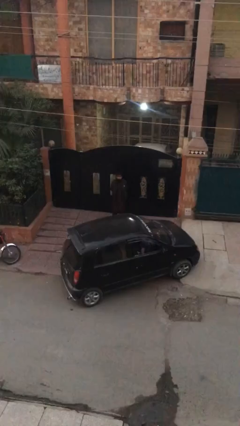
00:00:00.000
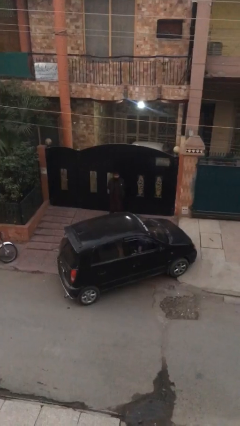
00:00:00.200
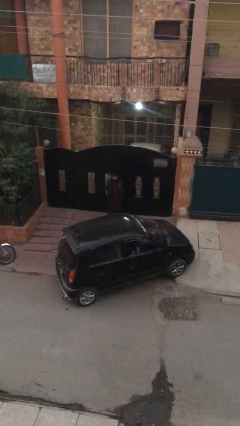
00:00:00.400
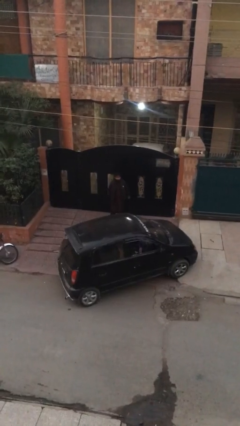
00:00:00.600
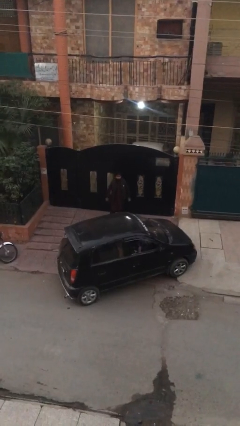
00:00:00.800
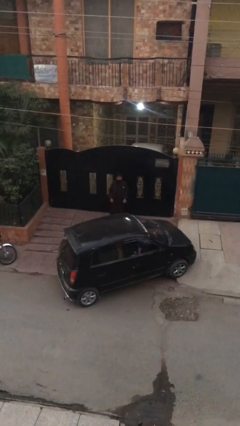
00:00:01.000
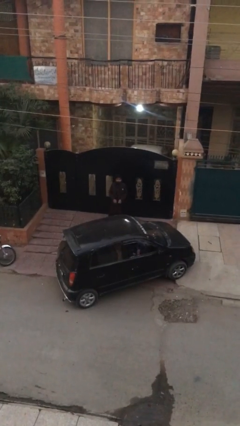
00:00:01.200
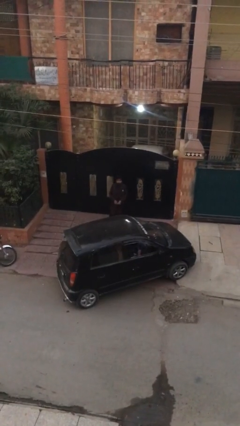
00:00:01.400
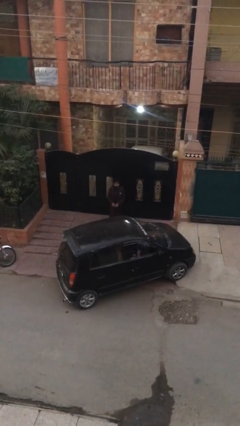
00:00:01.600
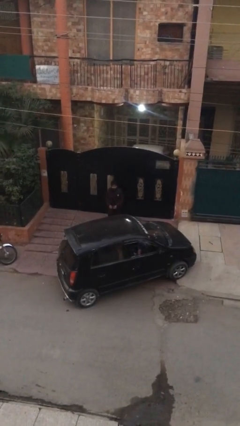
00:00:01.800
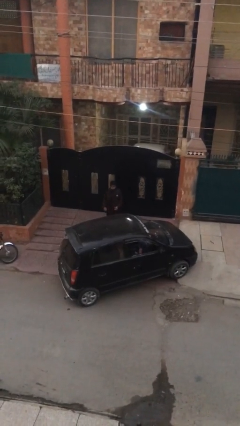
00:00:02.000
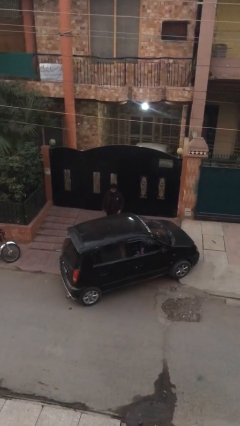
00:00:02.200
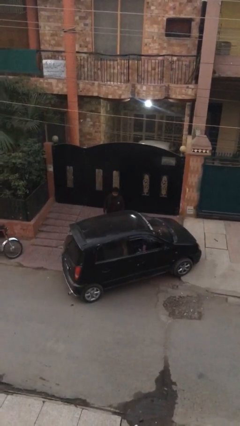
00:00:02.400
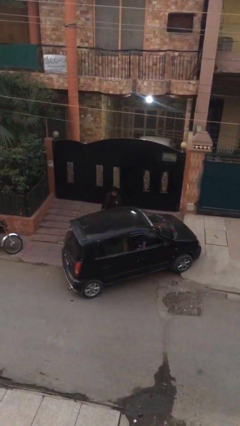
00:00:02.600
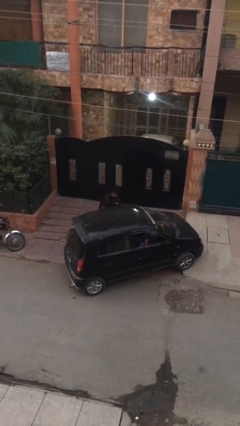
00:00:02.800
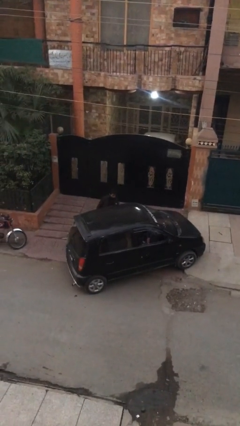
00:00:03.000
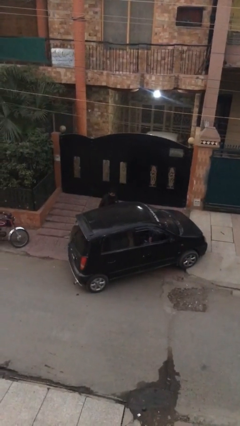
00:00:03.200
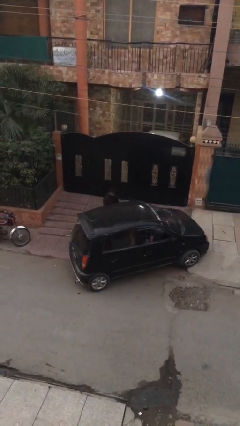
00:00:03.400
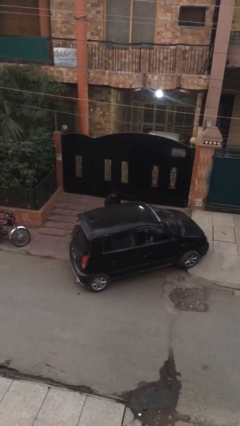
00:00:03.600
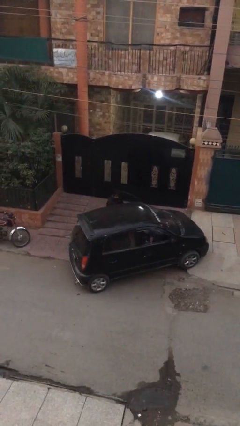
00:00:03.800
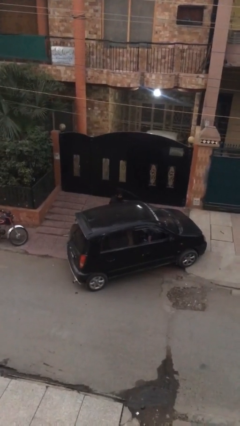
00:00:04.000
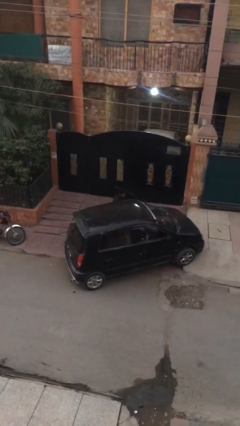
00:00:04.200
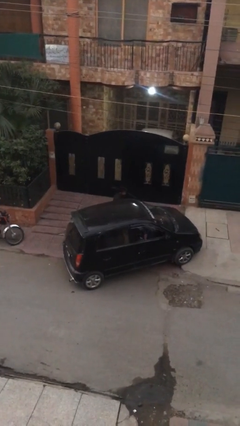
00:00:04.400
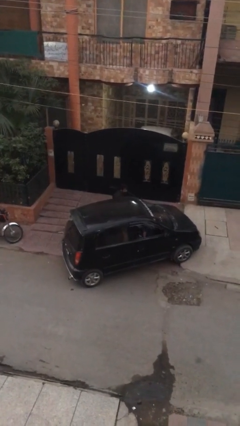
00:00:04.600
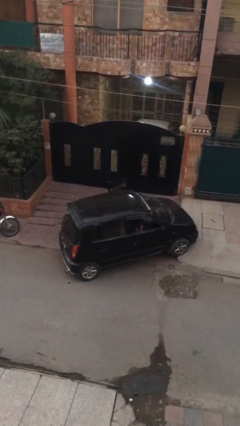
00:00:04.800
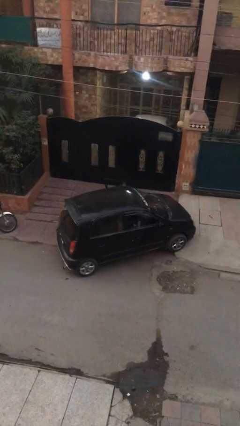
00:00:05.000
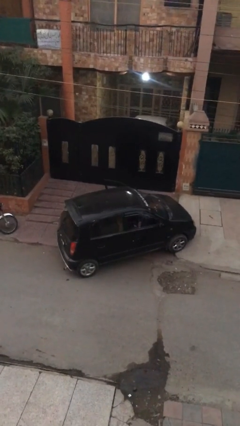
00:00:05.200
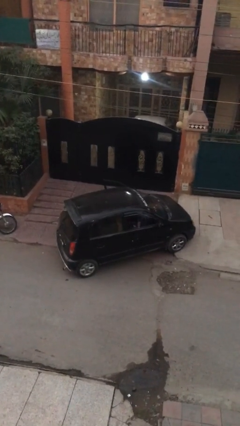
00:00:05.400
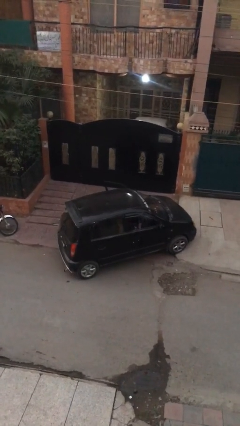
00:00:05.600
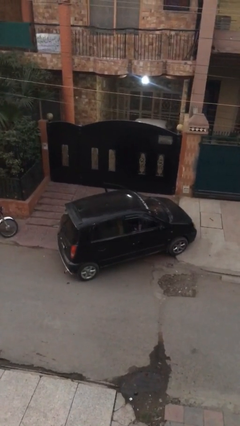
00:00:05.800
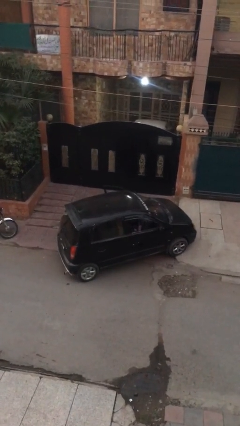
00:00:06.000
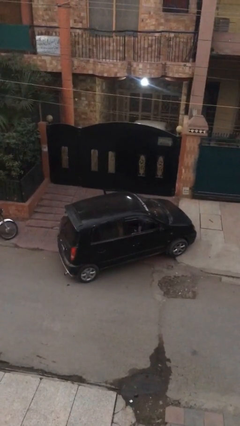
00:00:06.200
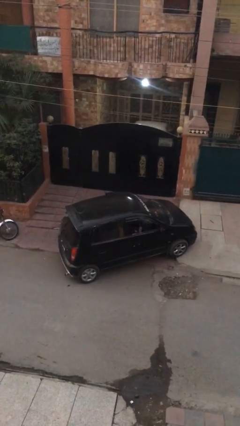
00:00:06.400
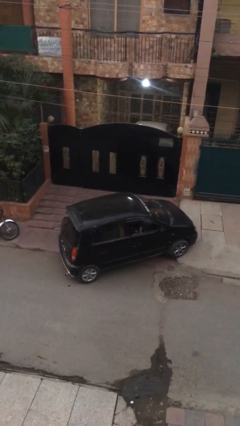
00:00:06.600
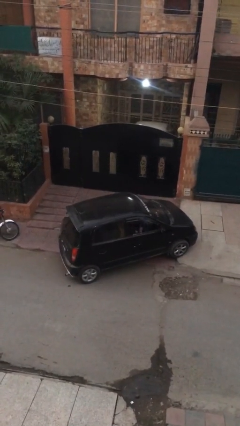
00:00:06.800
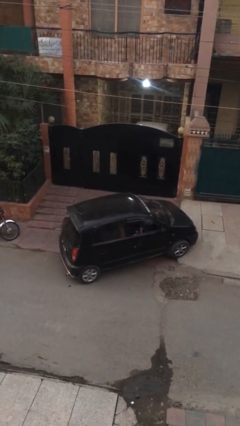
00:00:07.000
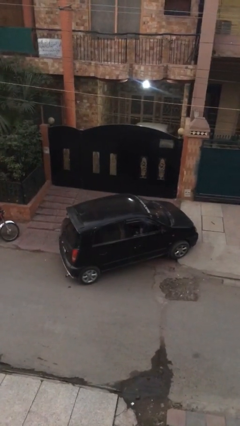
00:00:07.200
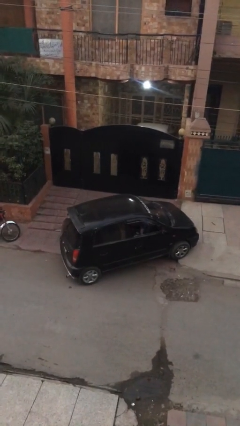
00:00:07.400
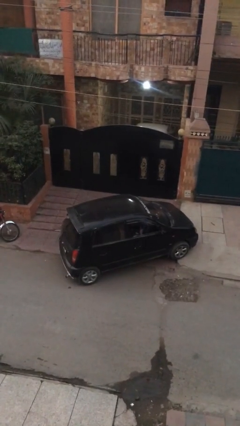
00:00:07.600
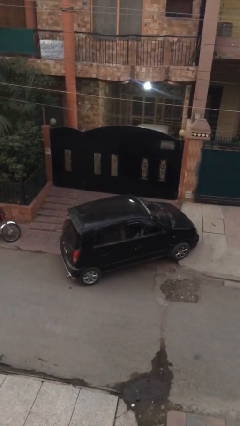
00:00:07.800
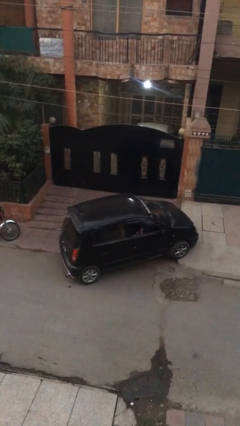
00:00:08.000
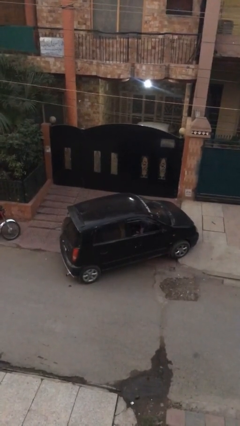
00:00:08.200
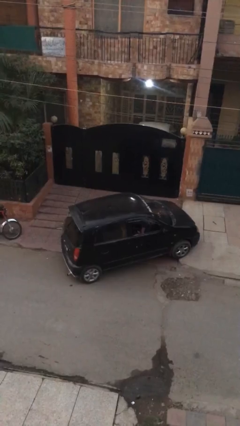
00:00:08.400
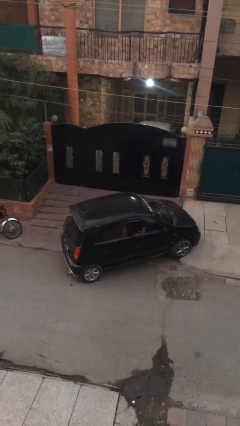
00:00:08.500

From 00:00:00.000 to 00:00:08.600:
car picks up person

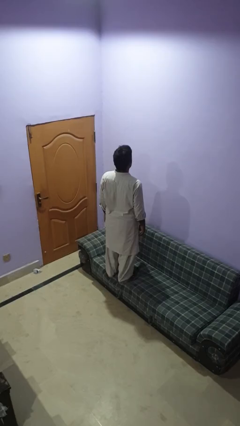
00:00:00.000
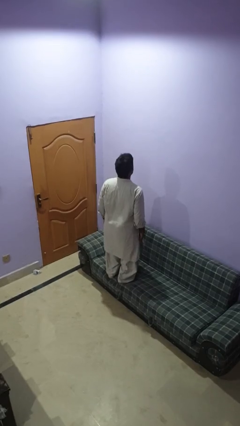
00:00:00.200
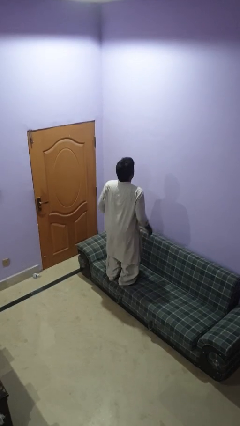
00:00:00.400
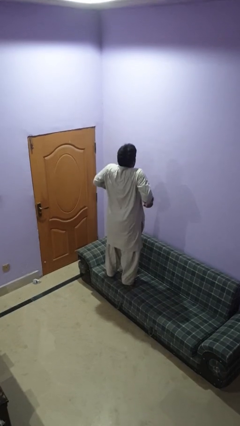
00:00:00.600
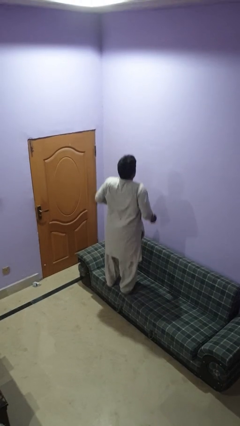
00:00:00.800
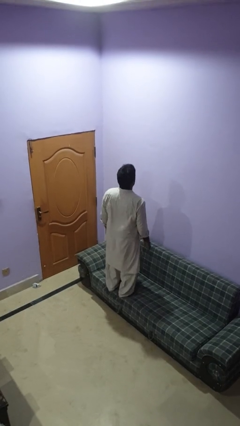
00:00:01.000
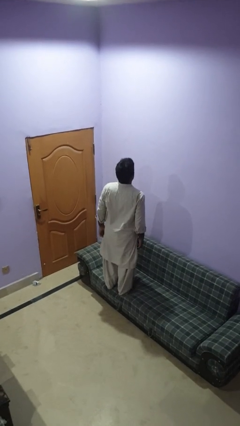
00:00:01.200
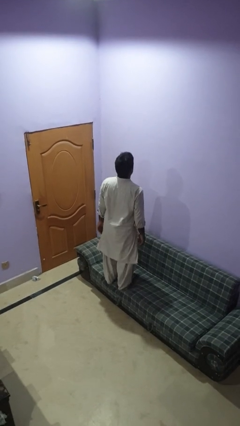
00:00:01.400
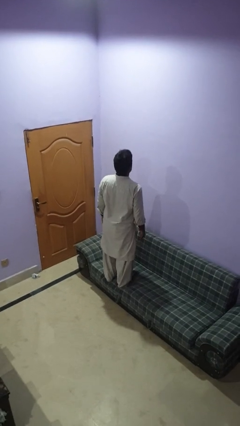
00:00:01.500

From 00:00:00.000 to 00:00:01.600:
person jumps on couch

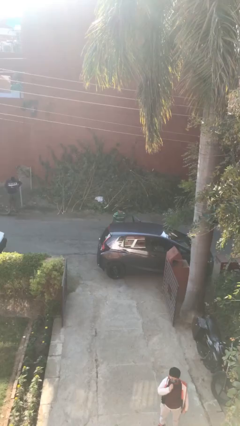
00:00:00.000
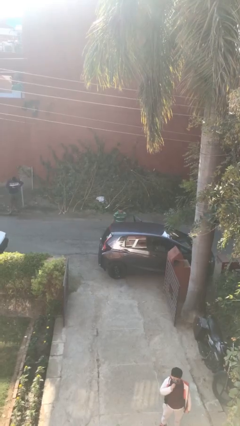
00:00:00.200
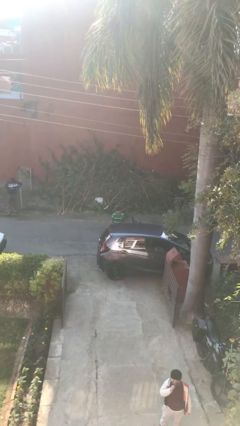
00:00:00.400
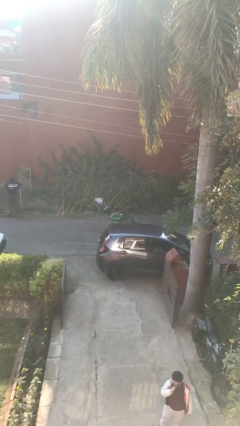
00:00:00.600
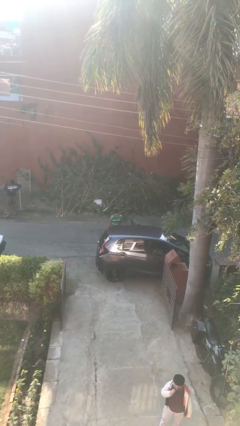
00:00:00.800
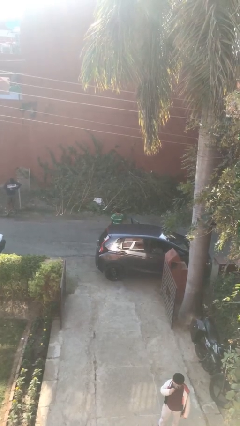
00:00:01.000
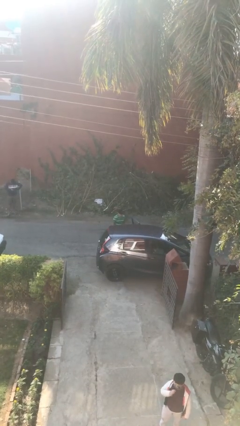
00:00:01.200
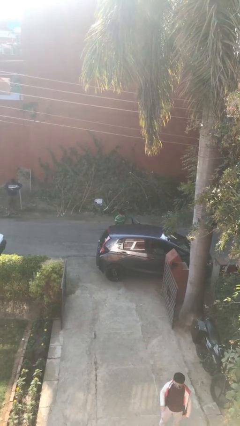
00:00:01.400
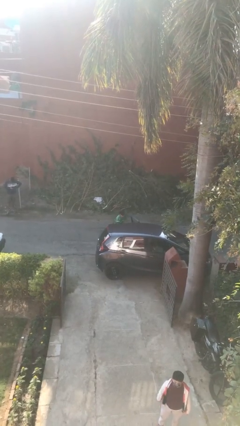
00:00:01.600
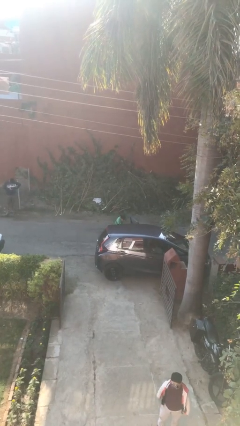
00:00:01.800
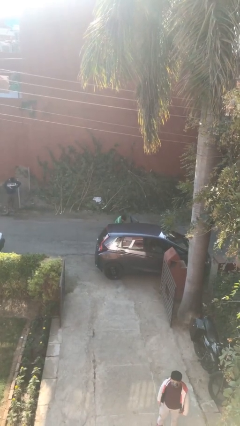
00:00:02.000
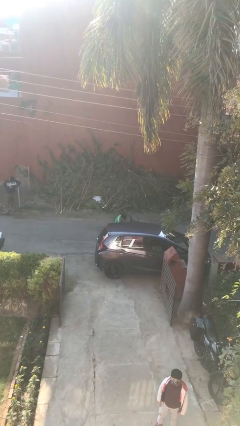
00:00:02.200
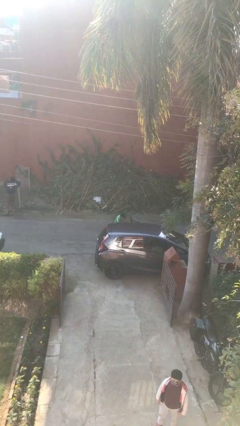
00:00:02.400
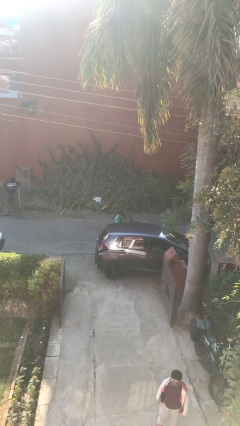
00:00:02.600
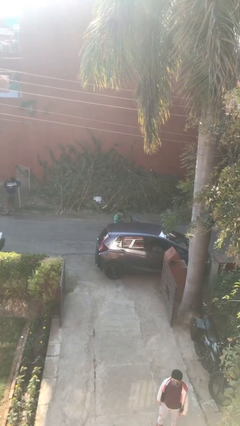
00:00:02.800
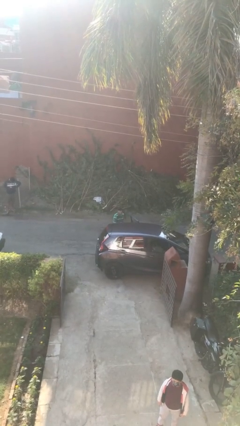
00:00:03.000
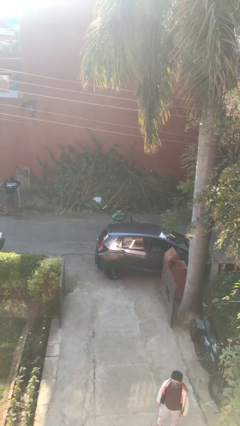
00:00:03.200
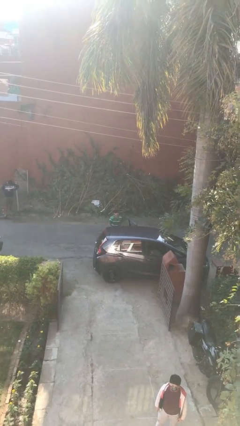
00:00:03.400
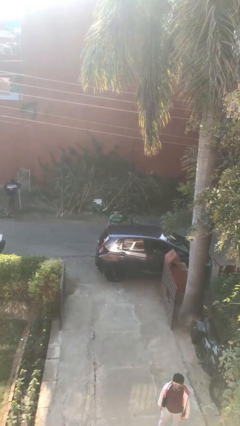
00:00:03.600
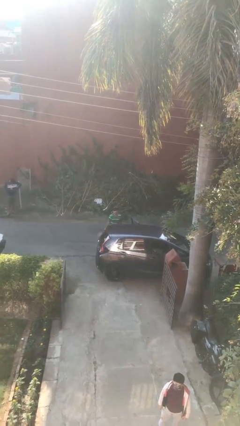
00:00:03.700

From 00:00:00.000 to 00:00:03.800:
person unloads car

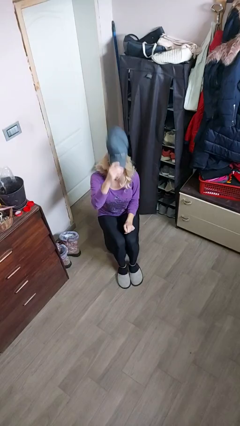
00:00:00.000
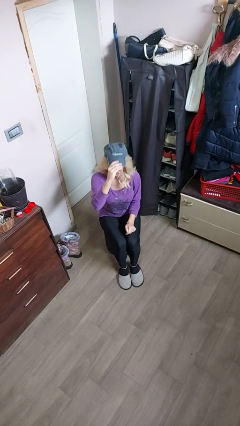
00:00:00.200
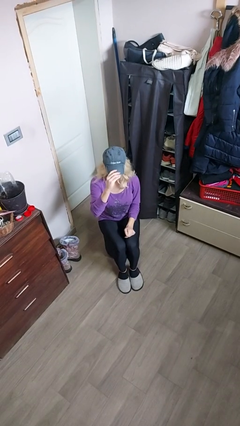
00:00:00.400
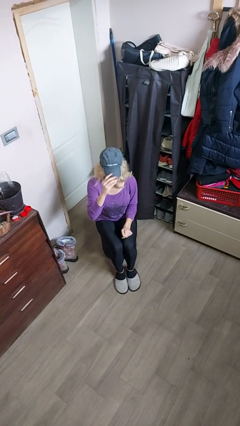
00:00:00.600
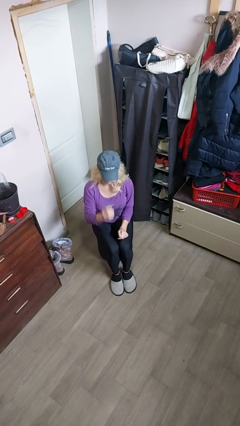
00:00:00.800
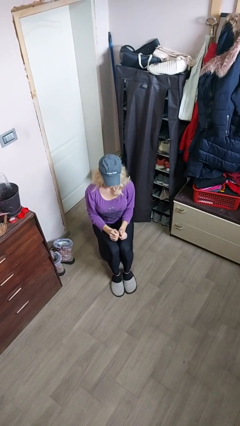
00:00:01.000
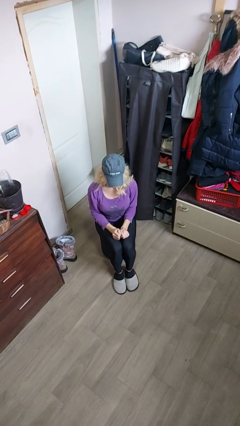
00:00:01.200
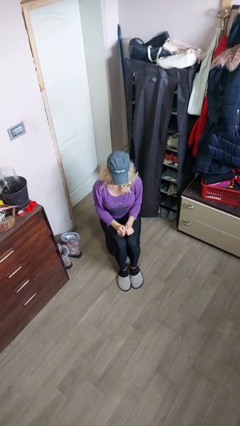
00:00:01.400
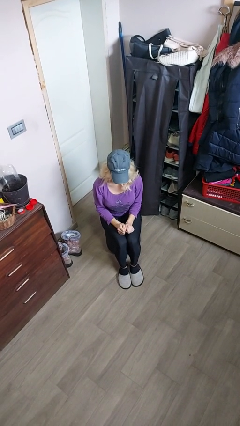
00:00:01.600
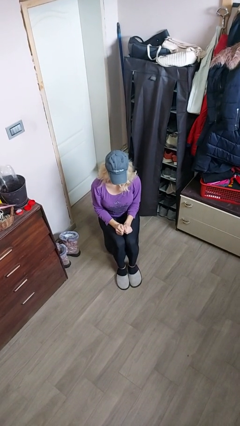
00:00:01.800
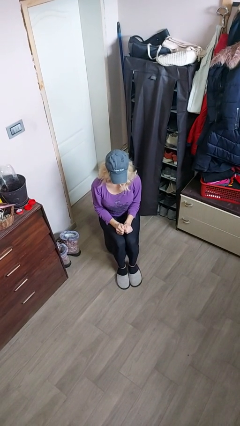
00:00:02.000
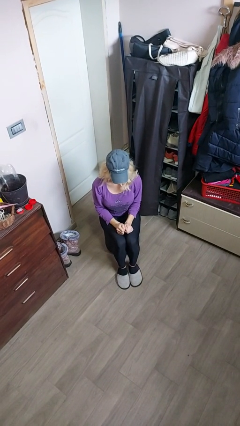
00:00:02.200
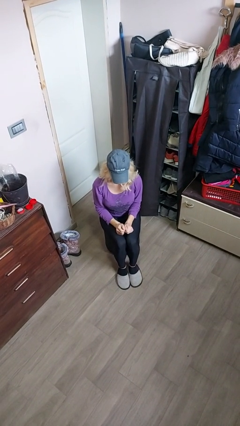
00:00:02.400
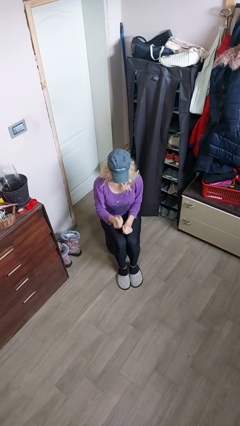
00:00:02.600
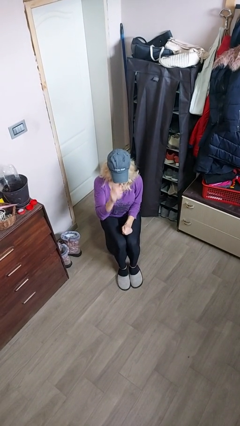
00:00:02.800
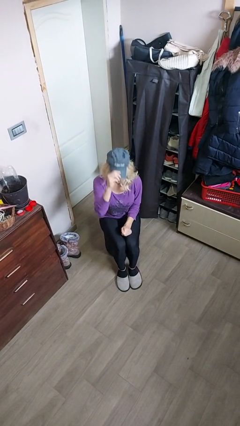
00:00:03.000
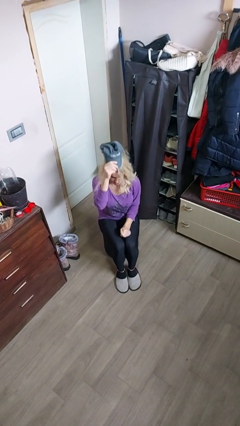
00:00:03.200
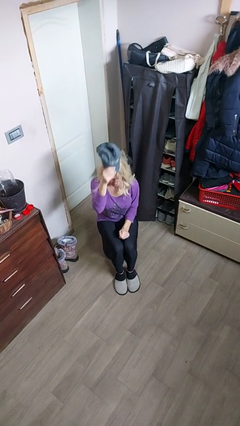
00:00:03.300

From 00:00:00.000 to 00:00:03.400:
person puts on hat

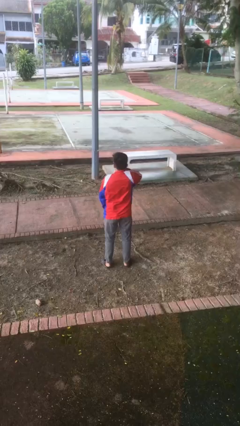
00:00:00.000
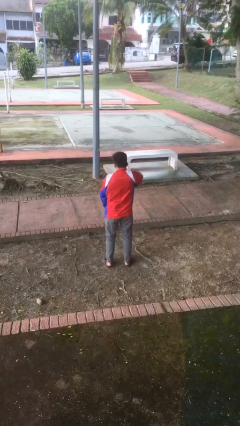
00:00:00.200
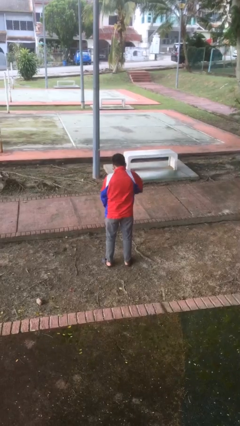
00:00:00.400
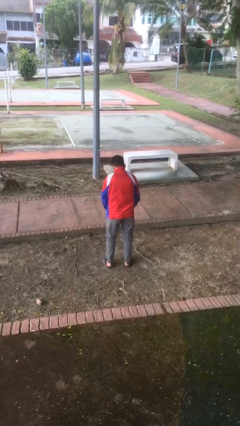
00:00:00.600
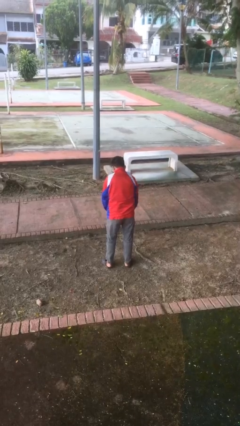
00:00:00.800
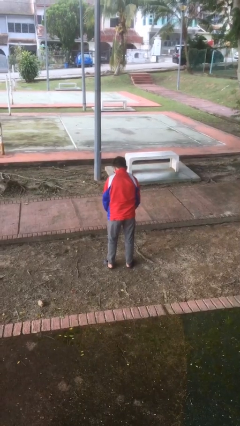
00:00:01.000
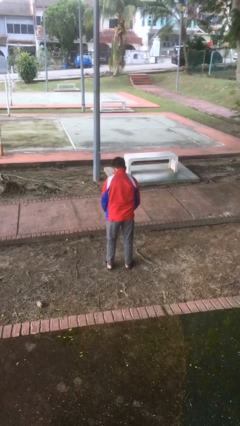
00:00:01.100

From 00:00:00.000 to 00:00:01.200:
person unzips jacket
